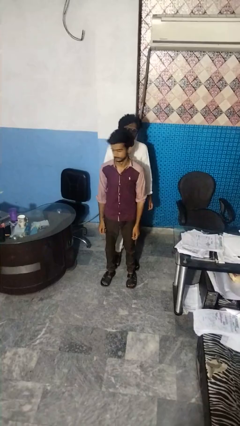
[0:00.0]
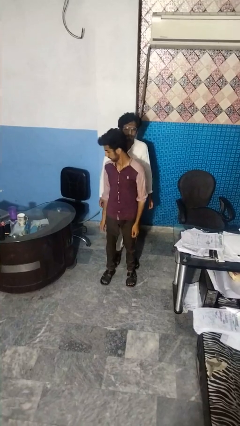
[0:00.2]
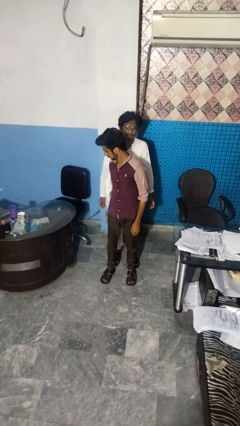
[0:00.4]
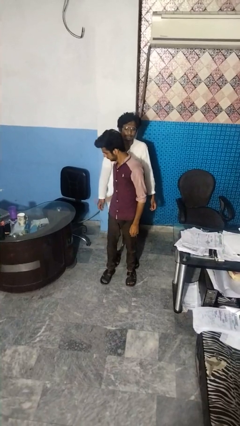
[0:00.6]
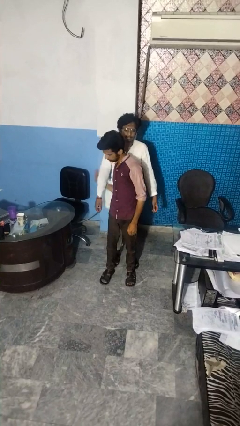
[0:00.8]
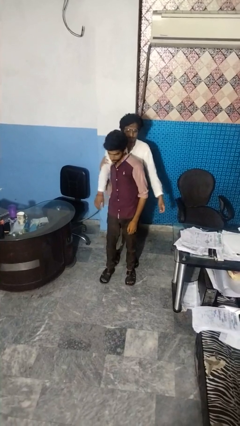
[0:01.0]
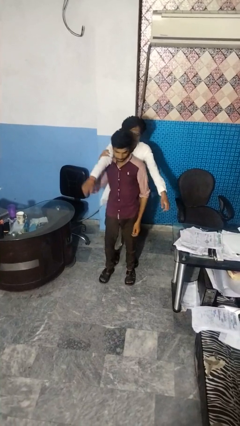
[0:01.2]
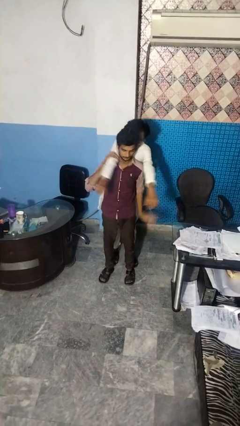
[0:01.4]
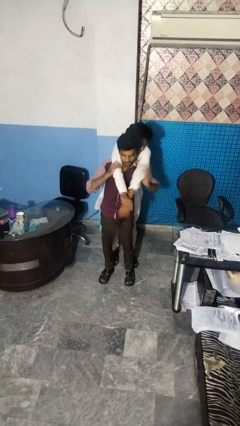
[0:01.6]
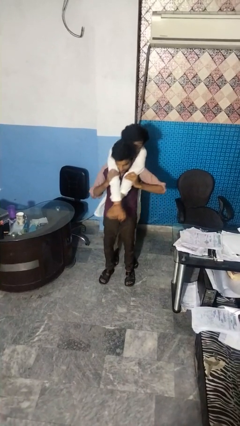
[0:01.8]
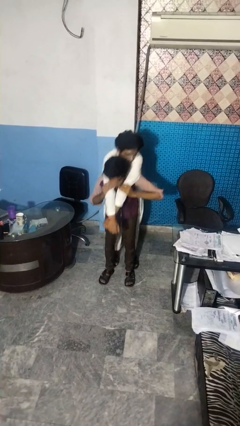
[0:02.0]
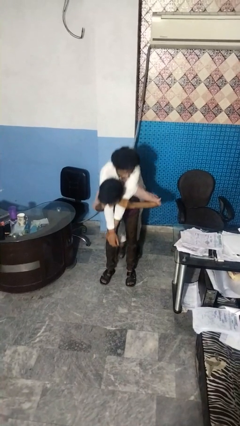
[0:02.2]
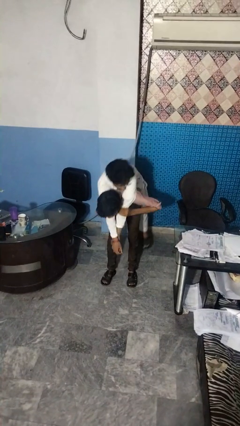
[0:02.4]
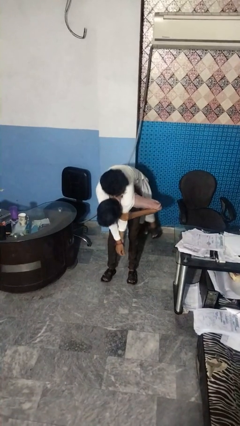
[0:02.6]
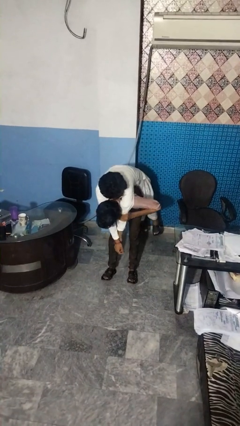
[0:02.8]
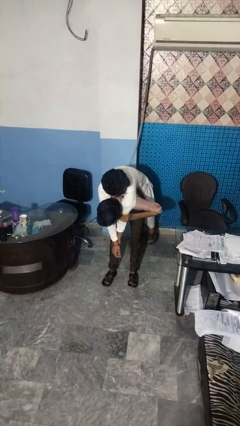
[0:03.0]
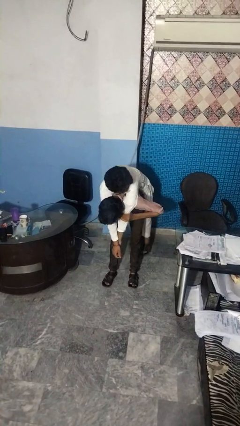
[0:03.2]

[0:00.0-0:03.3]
person carries person over shoulder

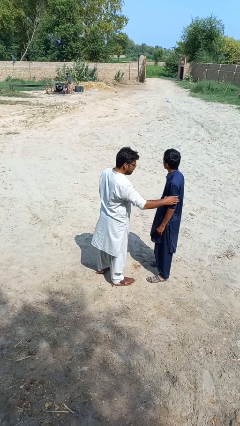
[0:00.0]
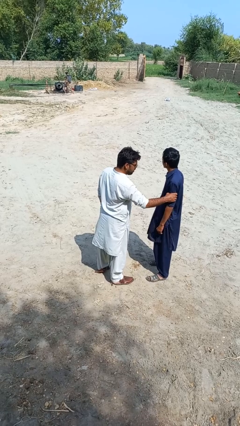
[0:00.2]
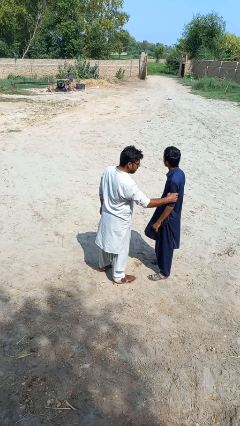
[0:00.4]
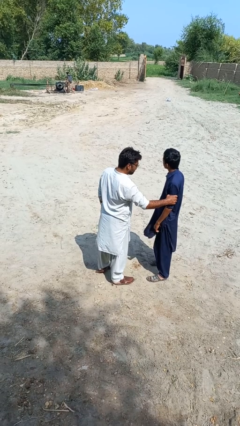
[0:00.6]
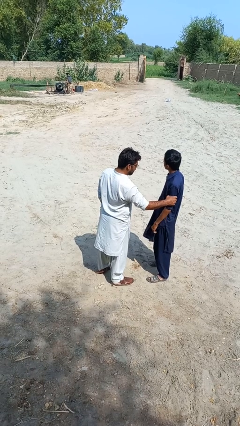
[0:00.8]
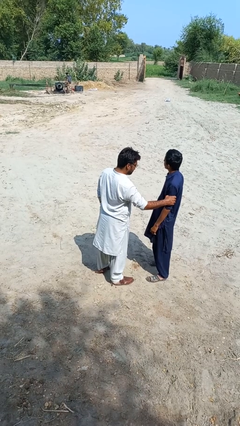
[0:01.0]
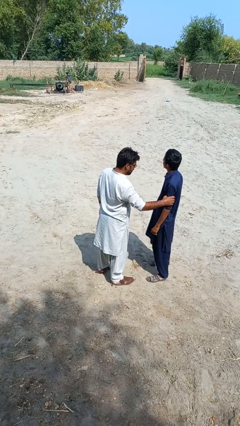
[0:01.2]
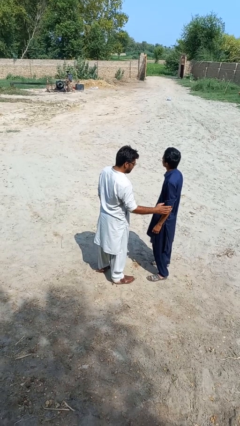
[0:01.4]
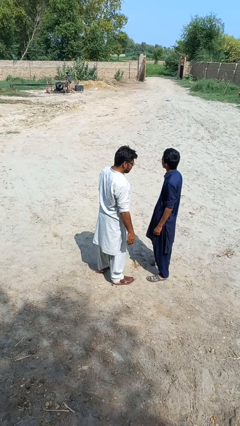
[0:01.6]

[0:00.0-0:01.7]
person grabs person by bicep

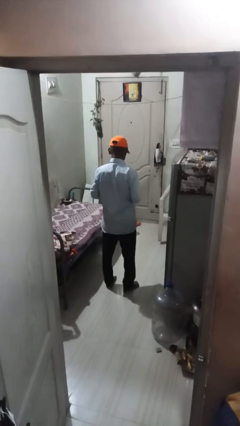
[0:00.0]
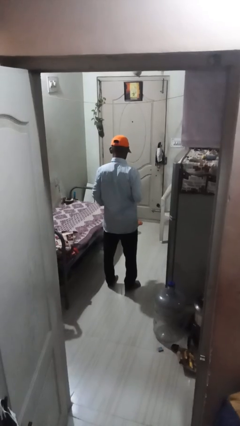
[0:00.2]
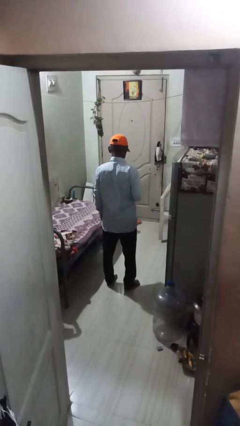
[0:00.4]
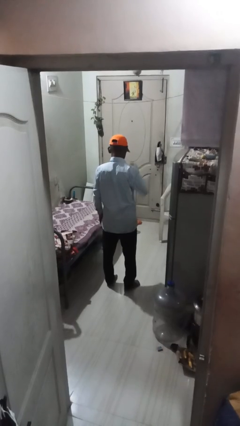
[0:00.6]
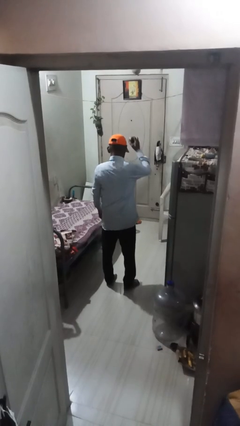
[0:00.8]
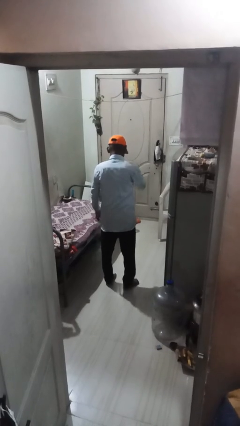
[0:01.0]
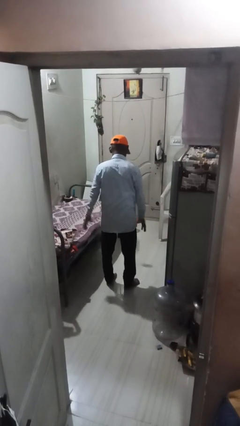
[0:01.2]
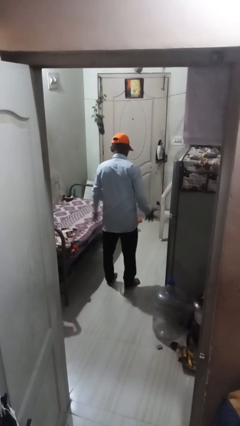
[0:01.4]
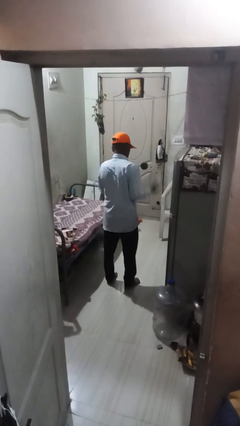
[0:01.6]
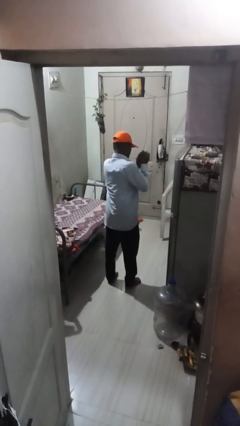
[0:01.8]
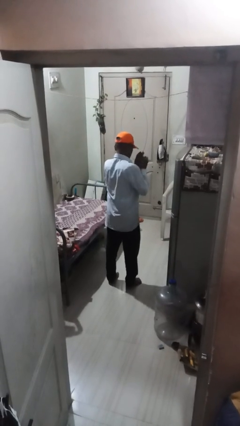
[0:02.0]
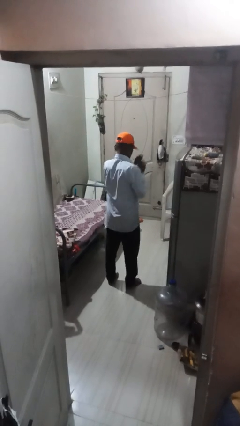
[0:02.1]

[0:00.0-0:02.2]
person bounces ball on floor

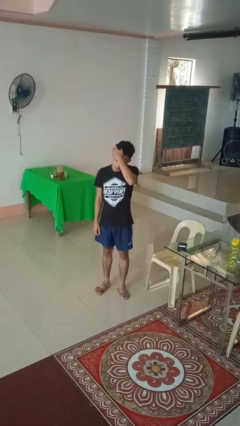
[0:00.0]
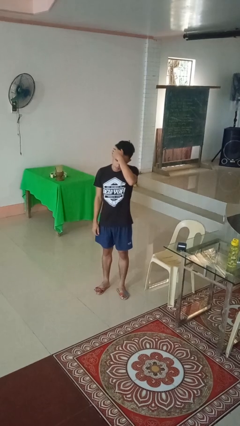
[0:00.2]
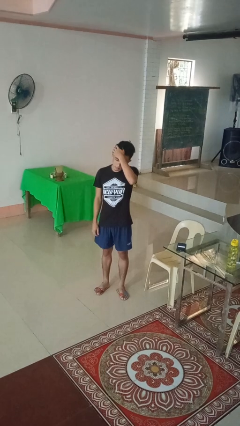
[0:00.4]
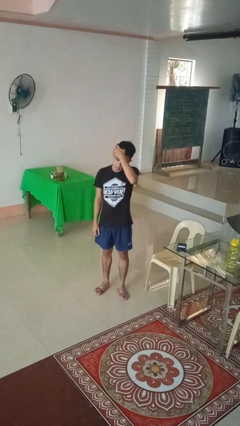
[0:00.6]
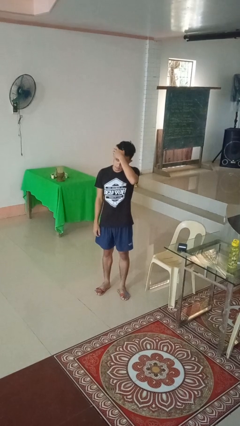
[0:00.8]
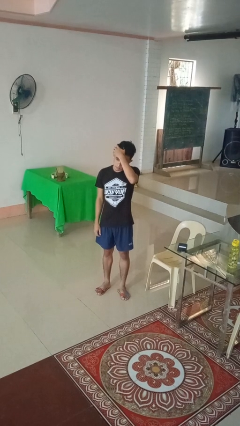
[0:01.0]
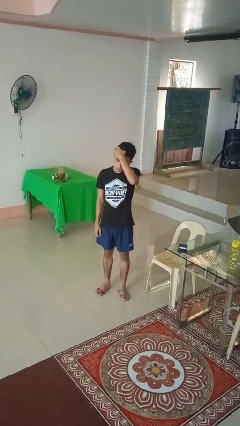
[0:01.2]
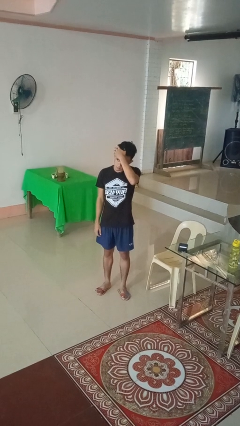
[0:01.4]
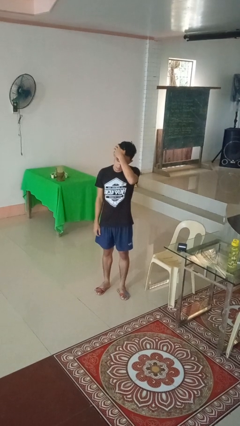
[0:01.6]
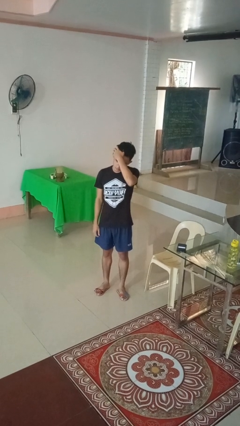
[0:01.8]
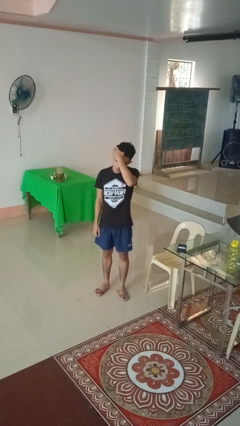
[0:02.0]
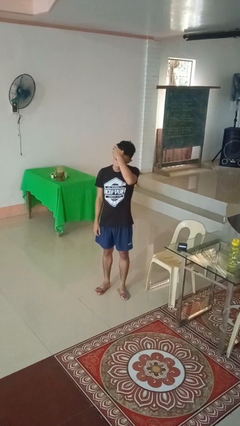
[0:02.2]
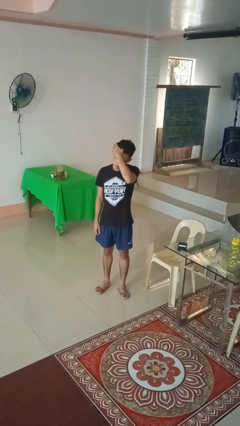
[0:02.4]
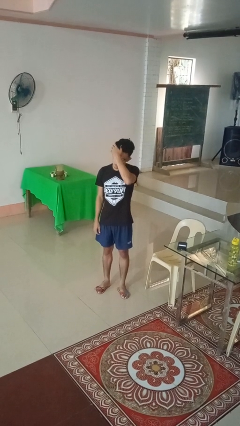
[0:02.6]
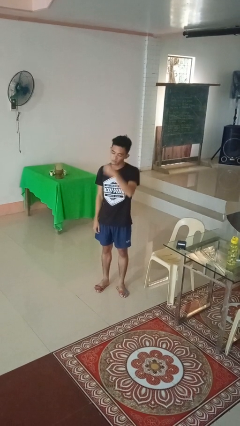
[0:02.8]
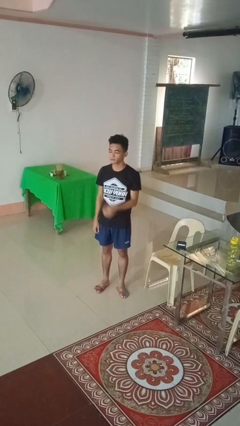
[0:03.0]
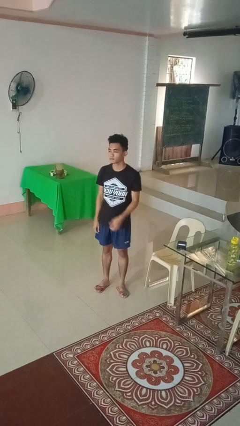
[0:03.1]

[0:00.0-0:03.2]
person scratches face

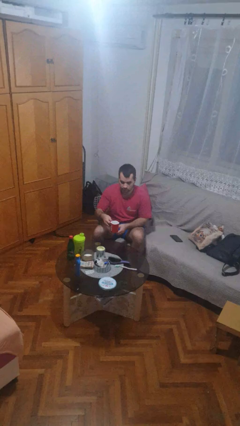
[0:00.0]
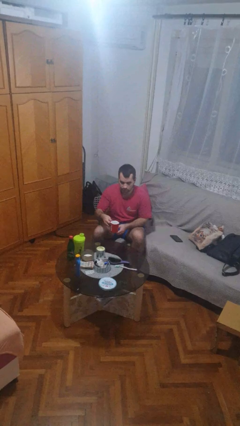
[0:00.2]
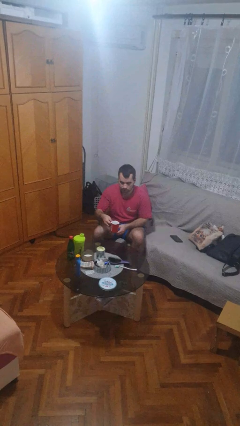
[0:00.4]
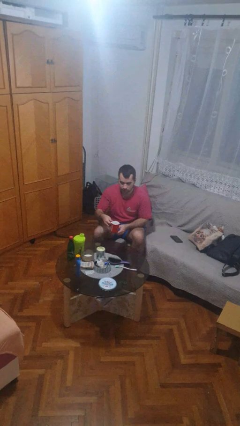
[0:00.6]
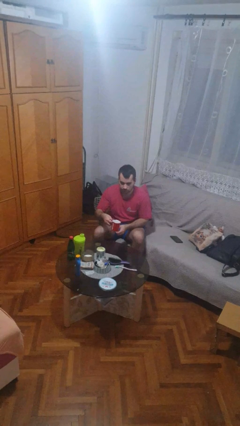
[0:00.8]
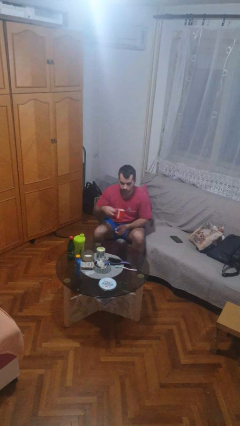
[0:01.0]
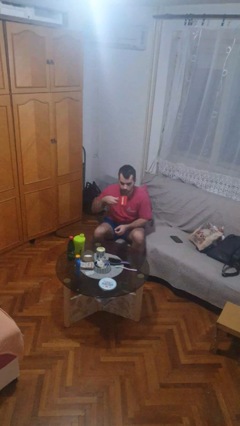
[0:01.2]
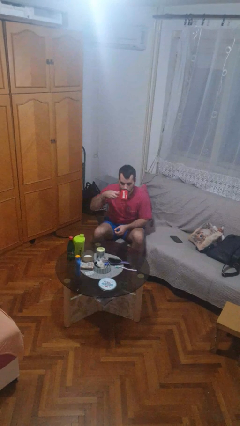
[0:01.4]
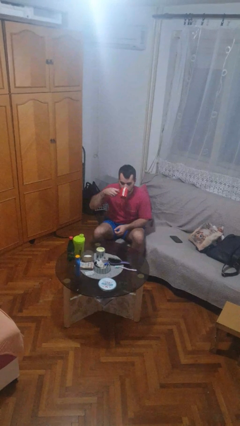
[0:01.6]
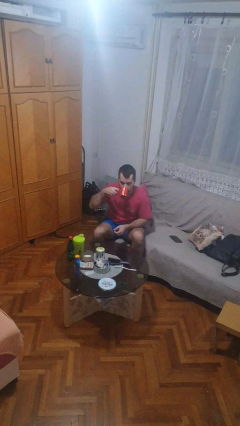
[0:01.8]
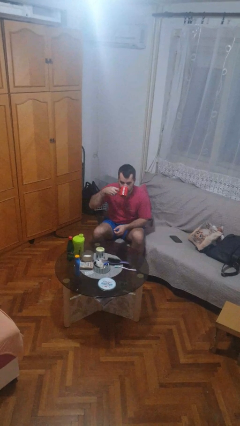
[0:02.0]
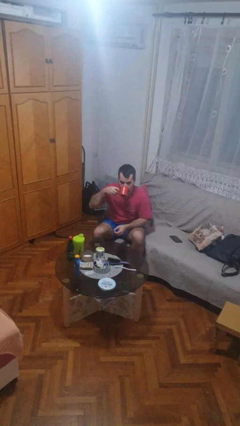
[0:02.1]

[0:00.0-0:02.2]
person drinks from mug

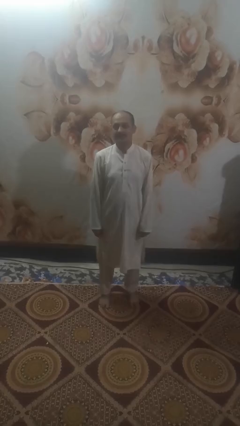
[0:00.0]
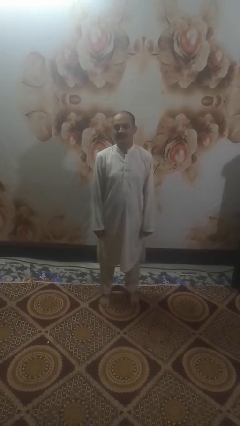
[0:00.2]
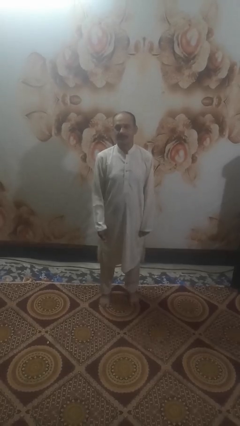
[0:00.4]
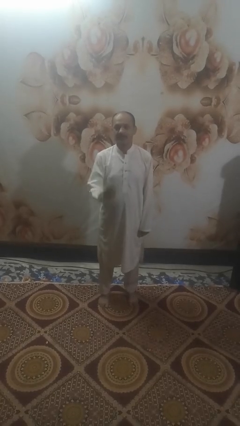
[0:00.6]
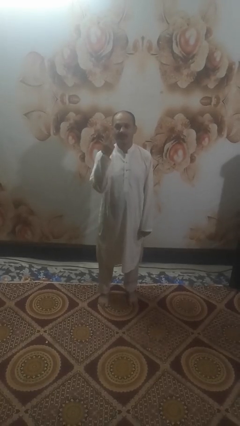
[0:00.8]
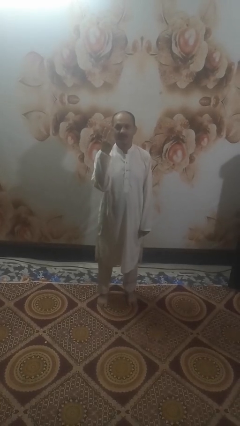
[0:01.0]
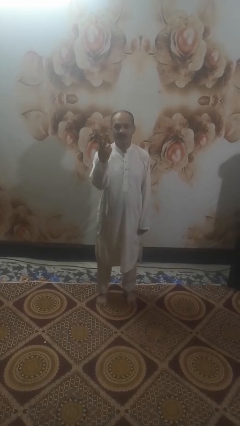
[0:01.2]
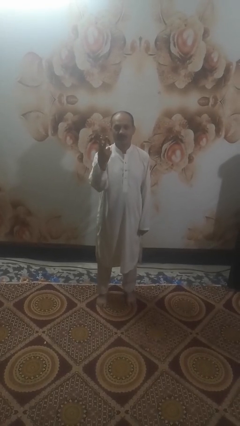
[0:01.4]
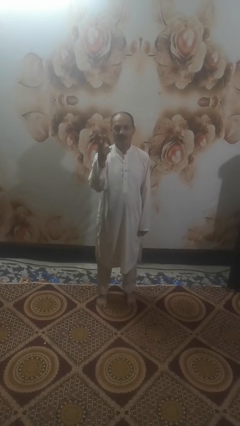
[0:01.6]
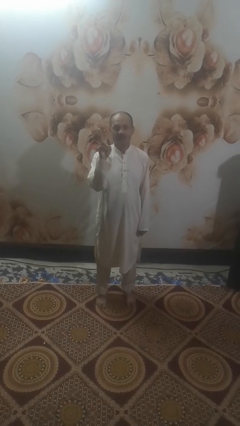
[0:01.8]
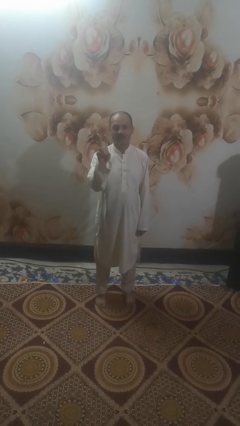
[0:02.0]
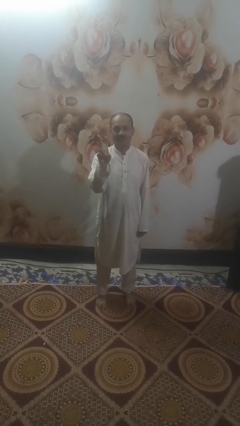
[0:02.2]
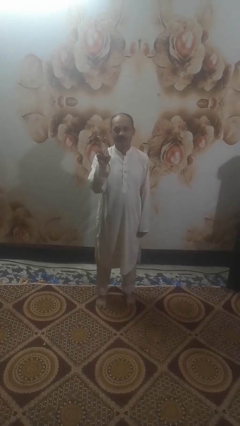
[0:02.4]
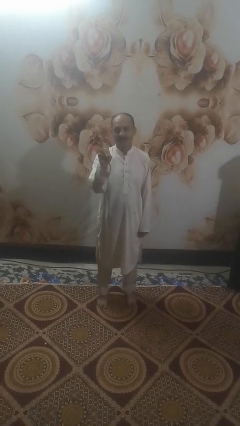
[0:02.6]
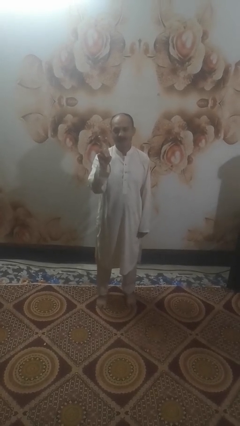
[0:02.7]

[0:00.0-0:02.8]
person gestures peace

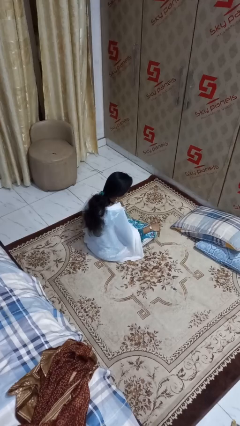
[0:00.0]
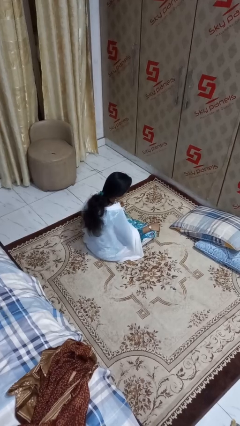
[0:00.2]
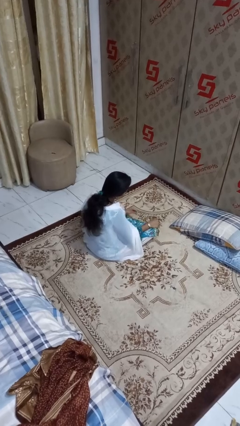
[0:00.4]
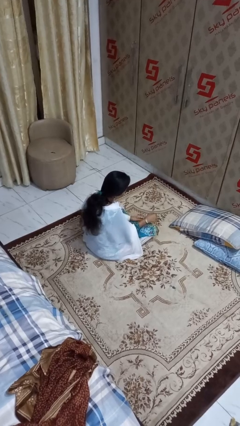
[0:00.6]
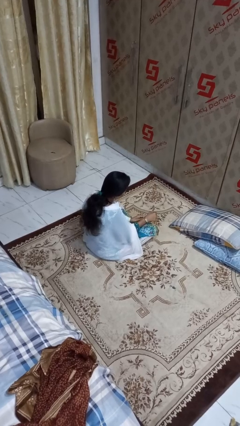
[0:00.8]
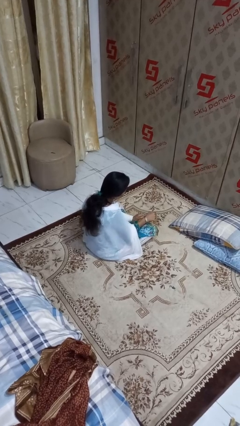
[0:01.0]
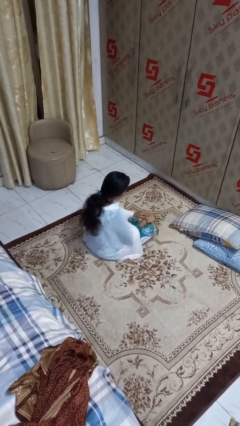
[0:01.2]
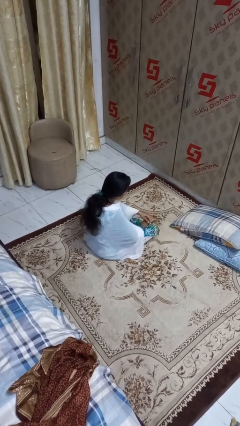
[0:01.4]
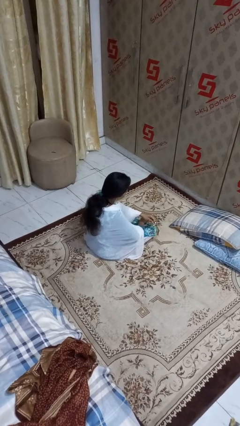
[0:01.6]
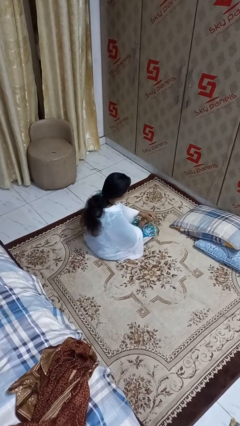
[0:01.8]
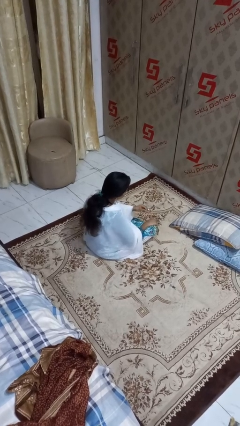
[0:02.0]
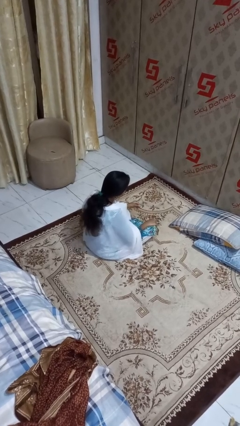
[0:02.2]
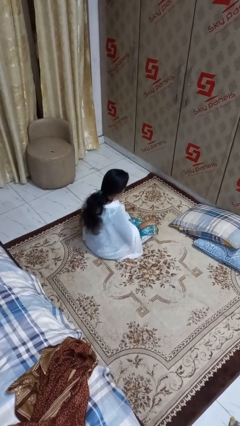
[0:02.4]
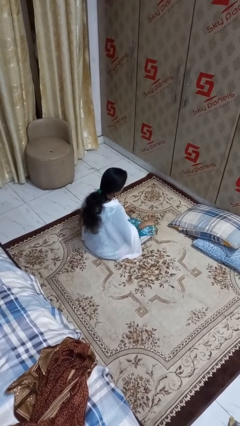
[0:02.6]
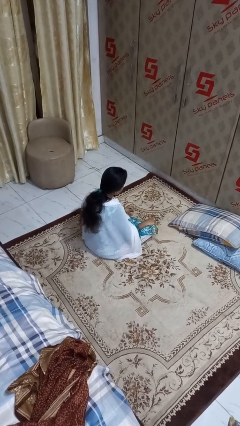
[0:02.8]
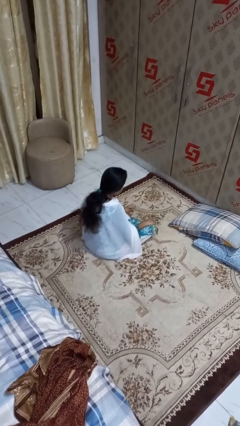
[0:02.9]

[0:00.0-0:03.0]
person takes off wristwatch
